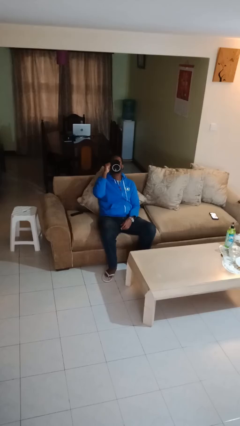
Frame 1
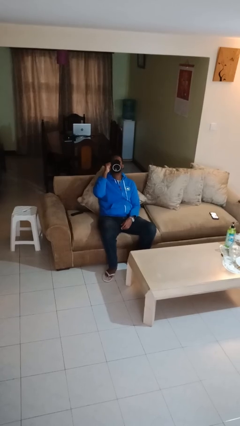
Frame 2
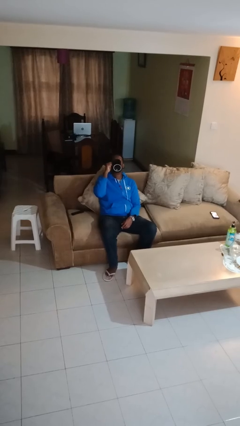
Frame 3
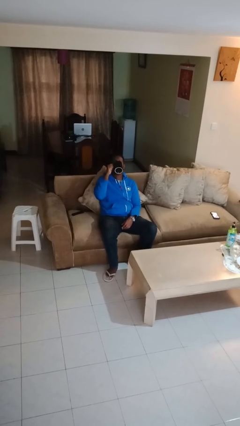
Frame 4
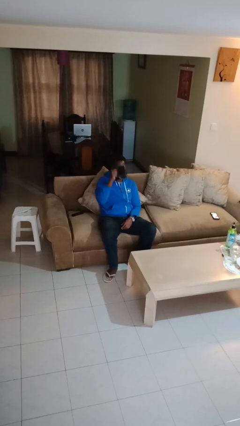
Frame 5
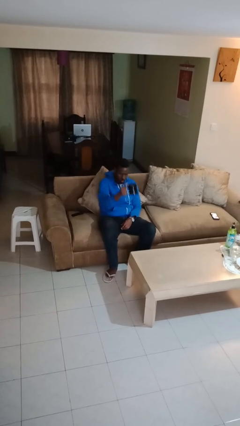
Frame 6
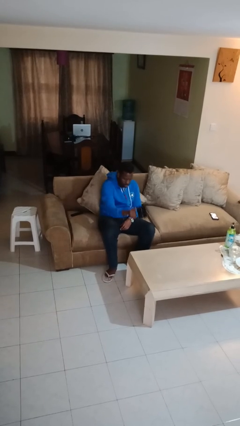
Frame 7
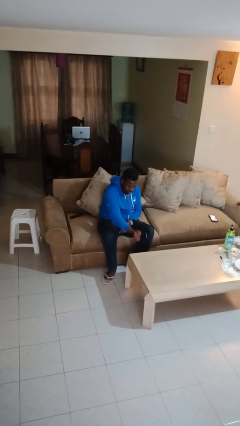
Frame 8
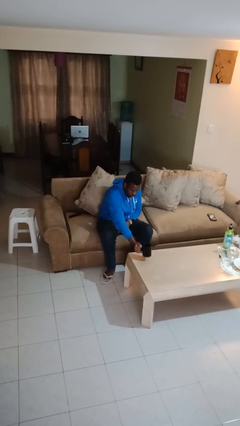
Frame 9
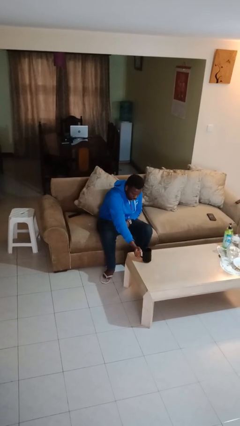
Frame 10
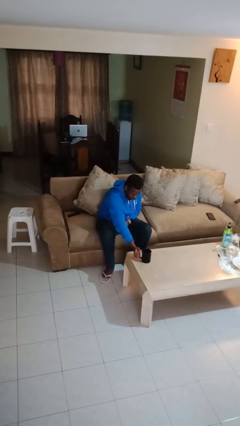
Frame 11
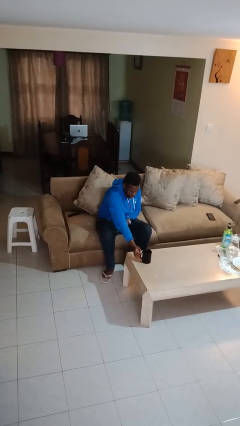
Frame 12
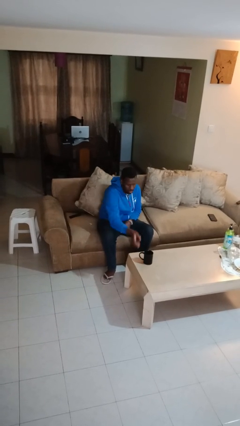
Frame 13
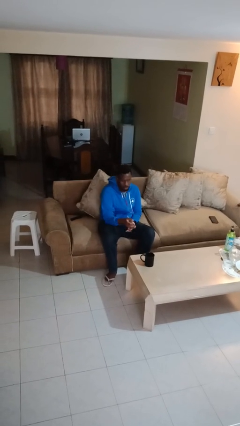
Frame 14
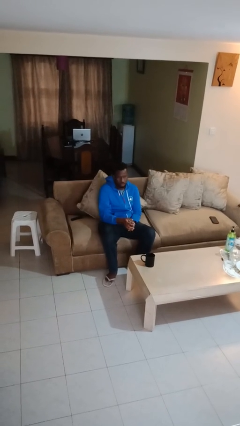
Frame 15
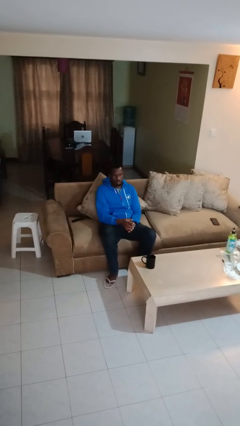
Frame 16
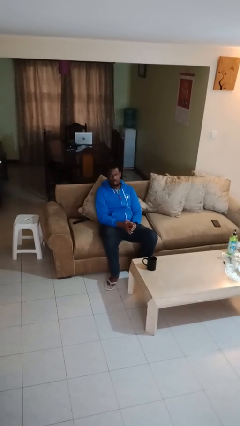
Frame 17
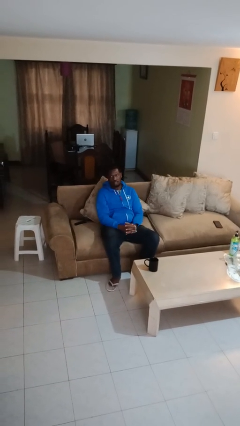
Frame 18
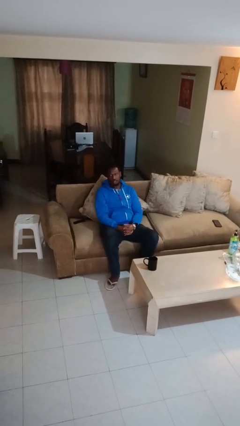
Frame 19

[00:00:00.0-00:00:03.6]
person puts down object on table

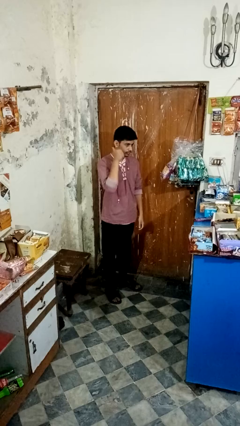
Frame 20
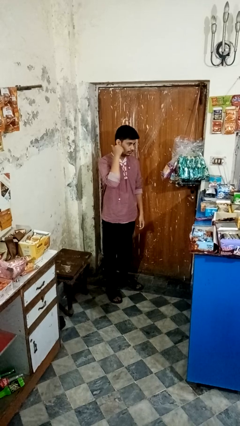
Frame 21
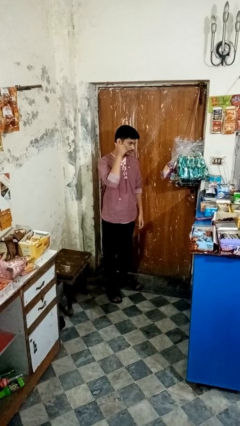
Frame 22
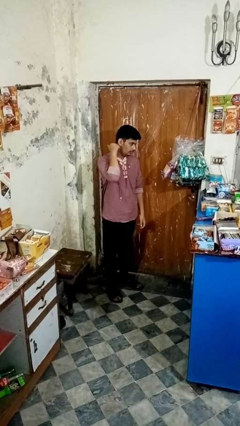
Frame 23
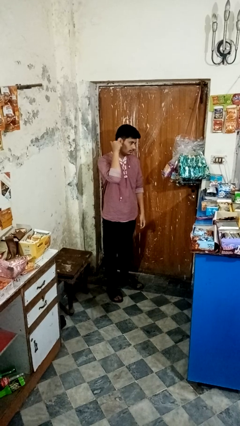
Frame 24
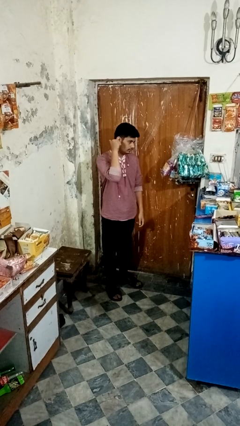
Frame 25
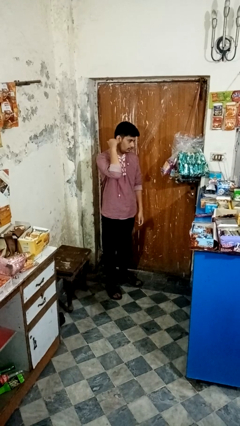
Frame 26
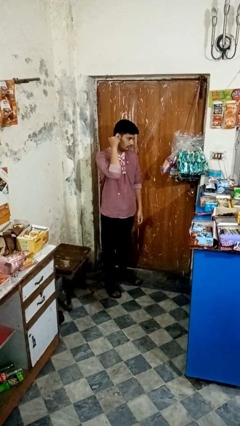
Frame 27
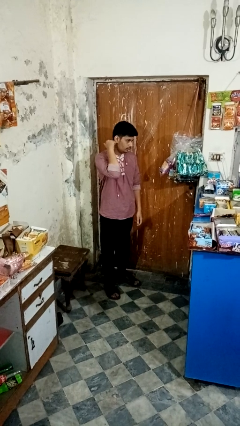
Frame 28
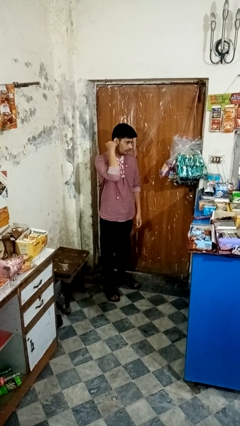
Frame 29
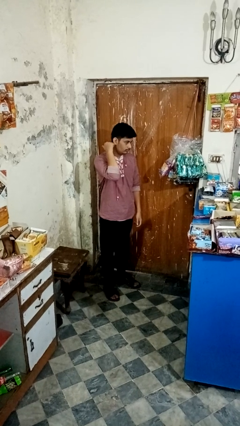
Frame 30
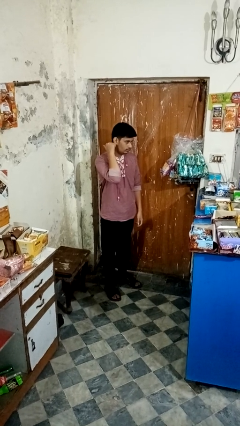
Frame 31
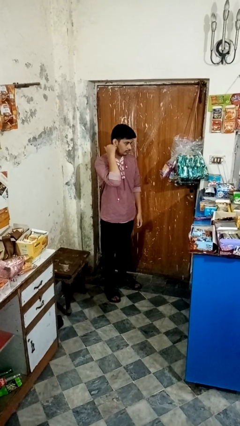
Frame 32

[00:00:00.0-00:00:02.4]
person gestures behind me

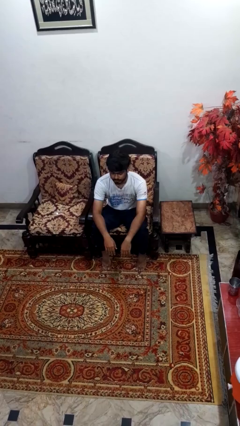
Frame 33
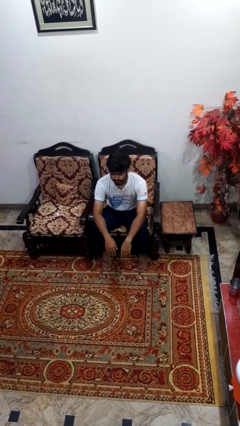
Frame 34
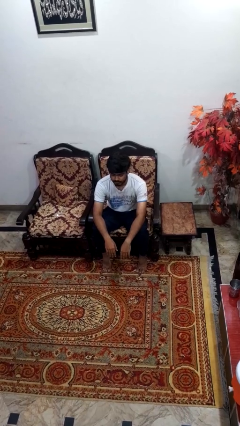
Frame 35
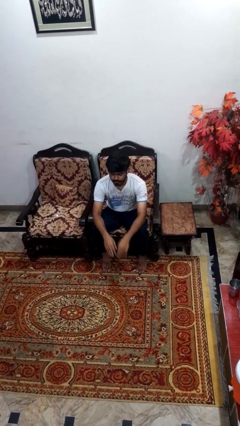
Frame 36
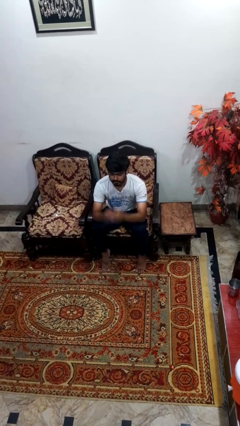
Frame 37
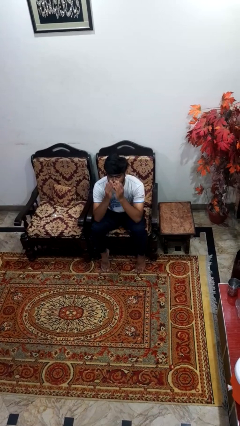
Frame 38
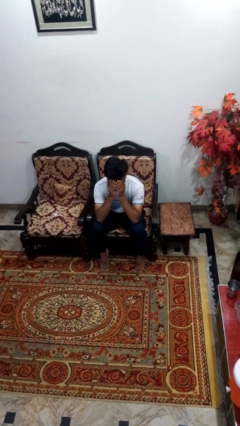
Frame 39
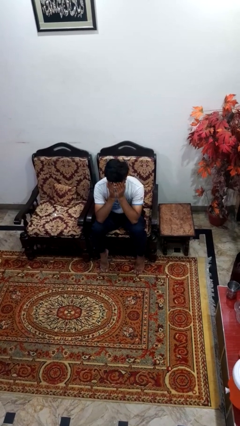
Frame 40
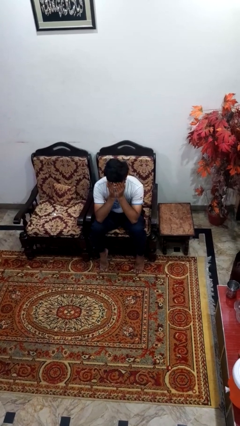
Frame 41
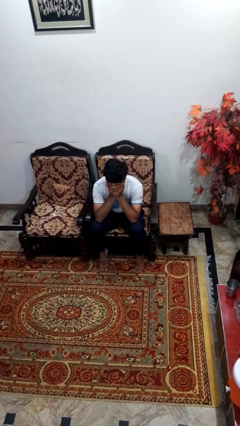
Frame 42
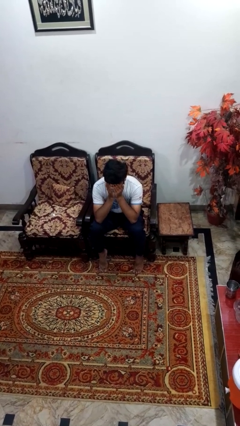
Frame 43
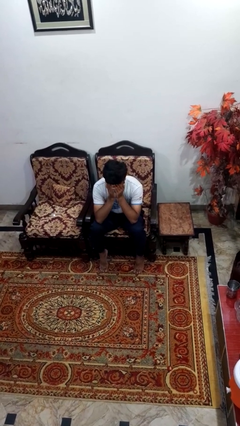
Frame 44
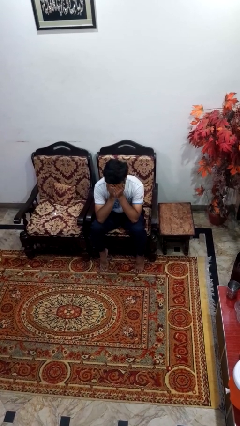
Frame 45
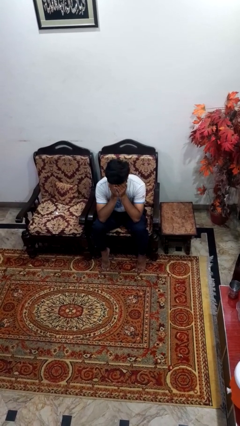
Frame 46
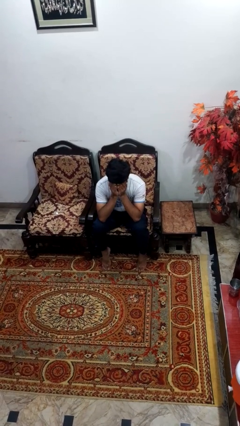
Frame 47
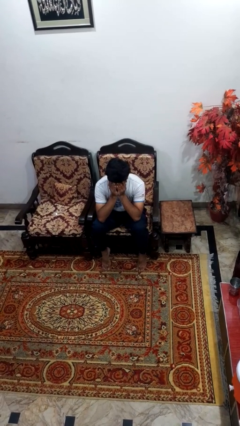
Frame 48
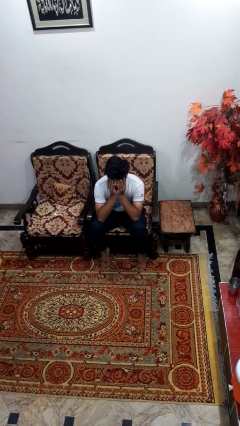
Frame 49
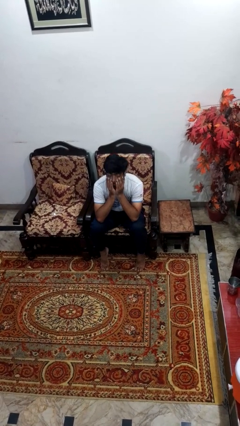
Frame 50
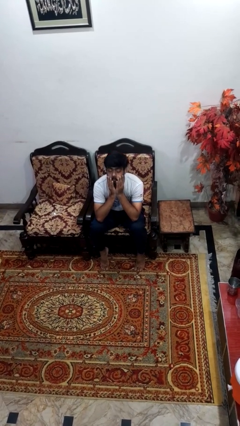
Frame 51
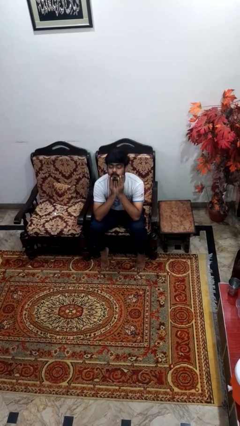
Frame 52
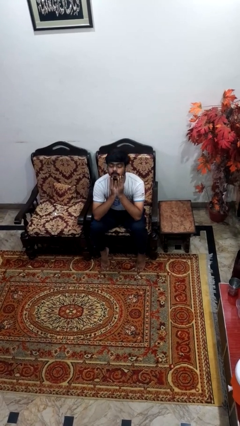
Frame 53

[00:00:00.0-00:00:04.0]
person covers face with hands

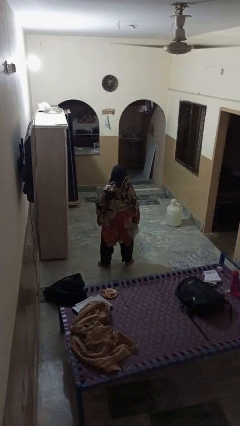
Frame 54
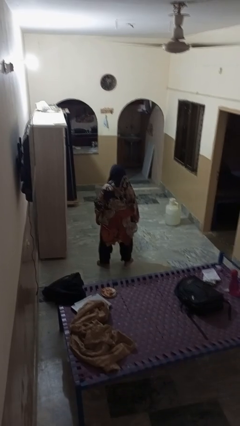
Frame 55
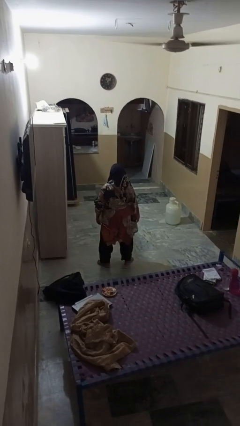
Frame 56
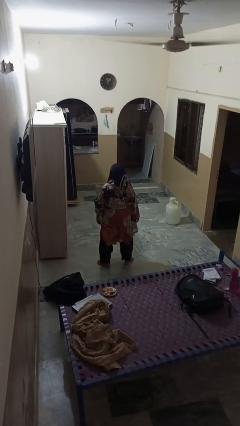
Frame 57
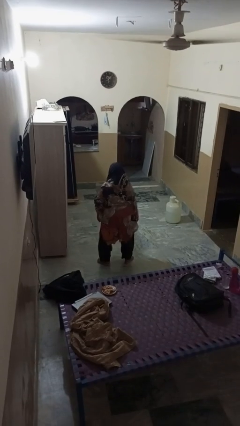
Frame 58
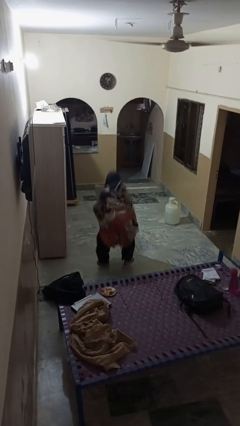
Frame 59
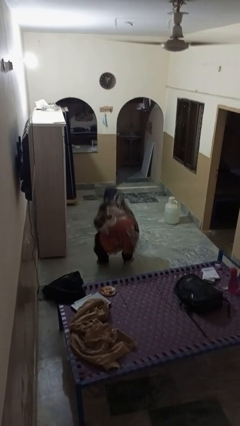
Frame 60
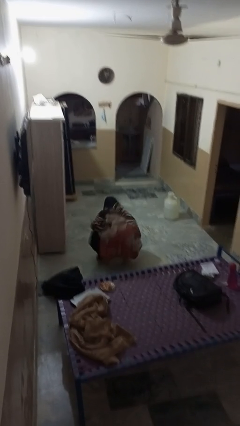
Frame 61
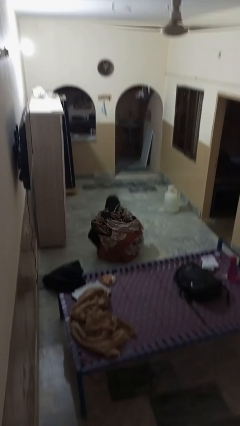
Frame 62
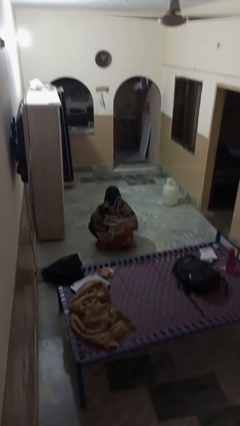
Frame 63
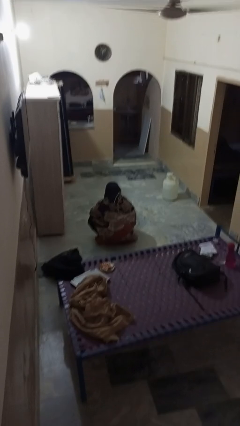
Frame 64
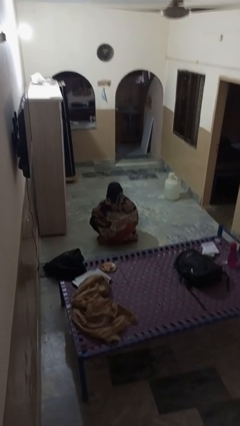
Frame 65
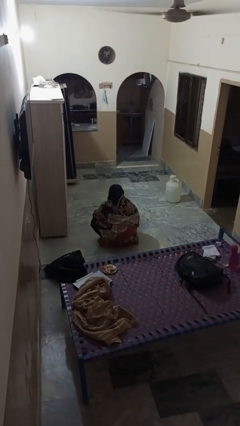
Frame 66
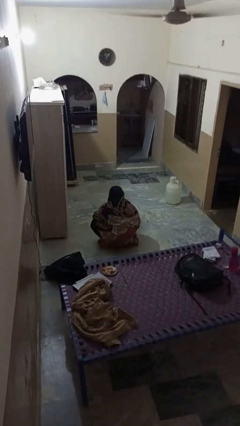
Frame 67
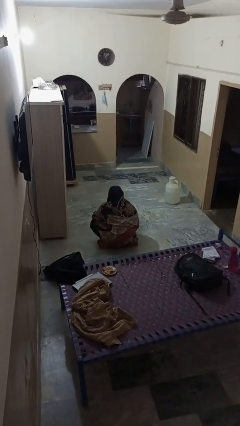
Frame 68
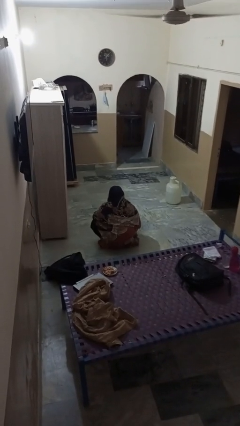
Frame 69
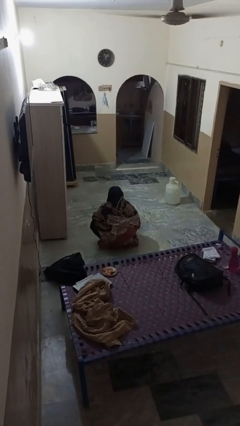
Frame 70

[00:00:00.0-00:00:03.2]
person squats

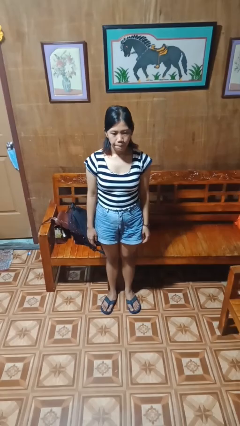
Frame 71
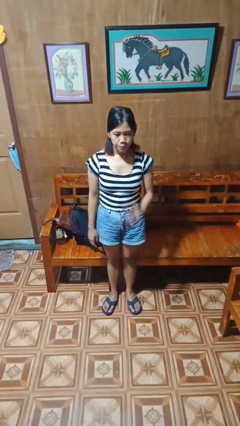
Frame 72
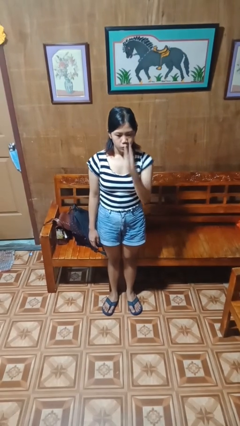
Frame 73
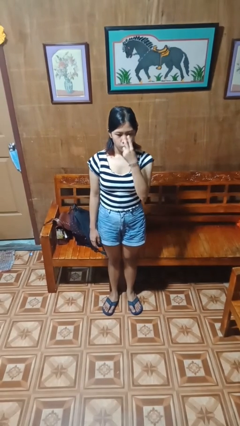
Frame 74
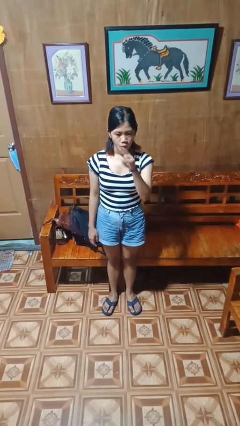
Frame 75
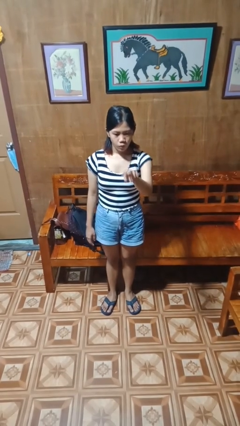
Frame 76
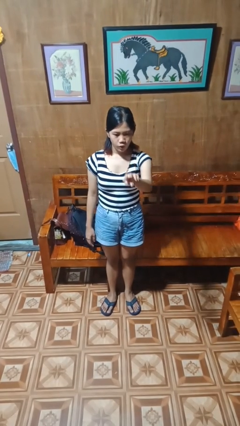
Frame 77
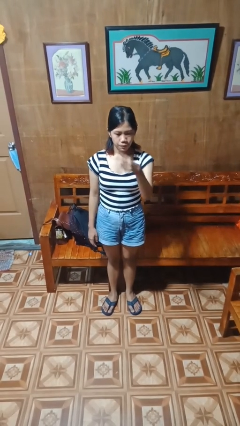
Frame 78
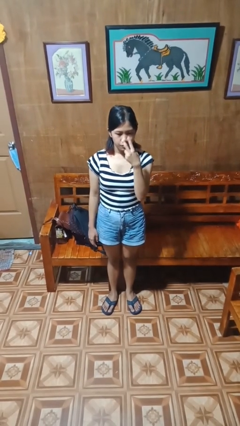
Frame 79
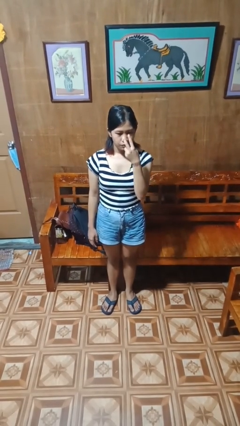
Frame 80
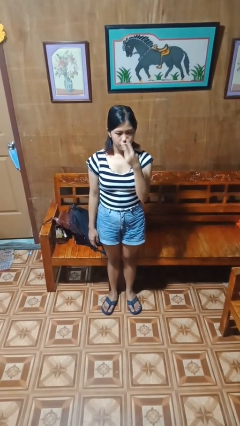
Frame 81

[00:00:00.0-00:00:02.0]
person gestures watch closely

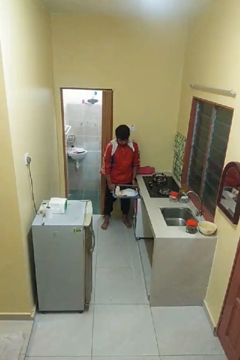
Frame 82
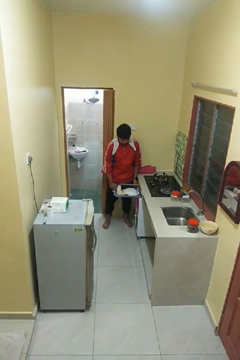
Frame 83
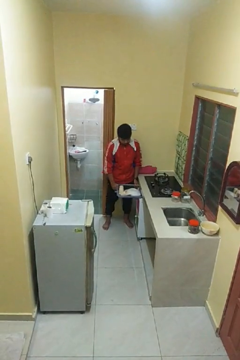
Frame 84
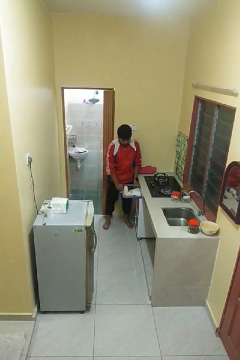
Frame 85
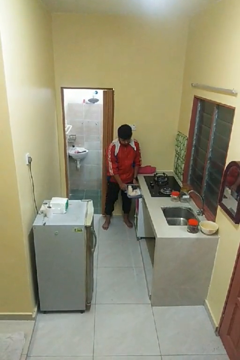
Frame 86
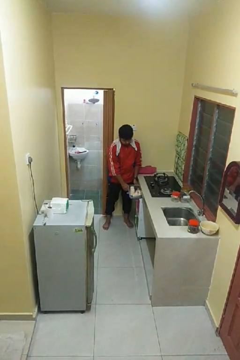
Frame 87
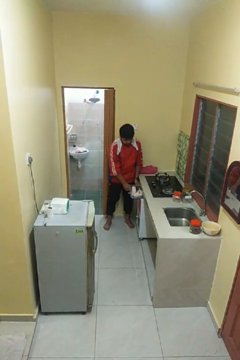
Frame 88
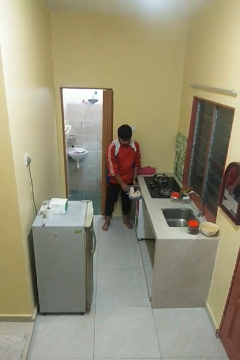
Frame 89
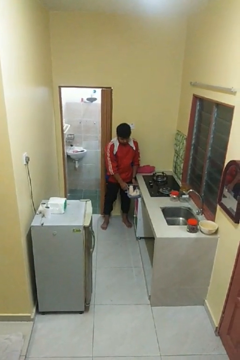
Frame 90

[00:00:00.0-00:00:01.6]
person closes kitchen drawer

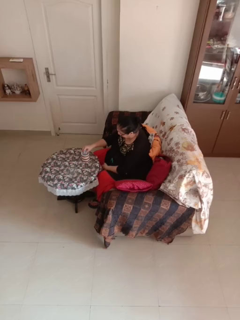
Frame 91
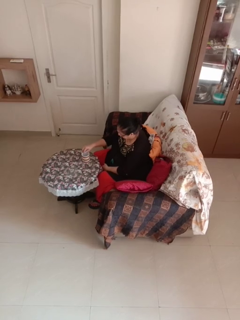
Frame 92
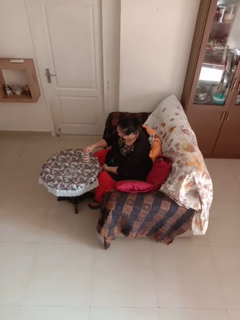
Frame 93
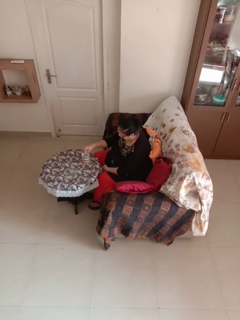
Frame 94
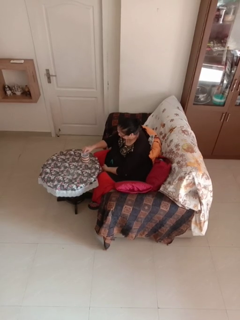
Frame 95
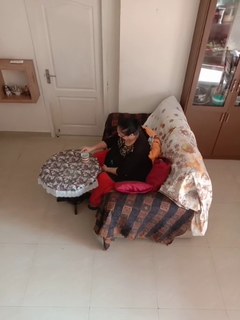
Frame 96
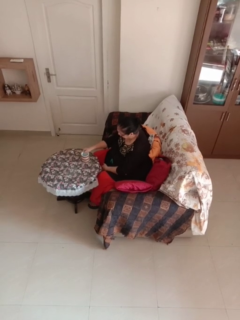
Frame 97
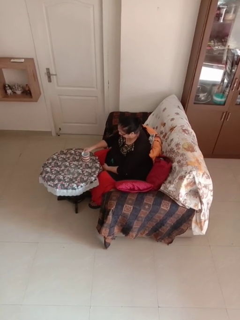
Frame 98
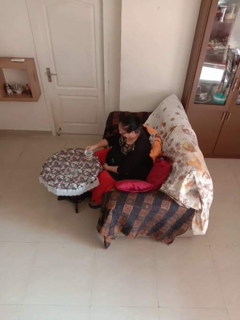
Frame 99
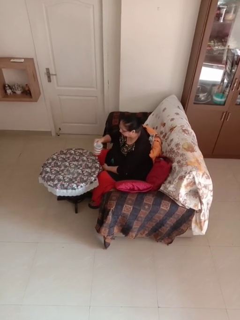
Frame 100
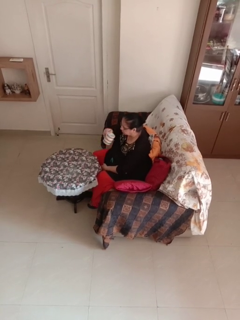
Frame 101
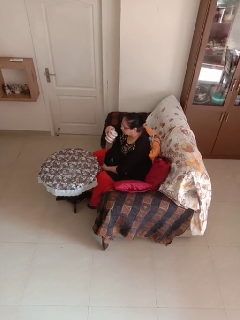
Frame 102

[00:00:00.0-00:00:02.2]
person stirs mug
